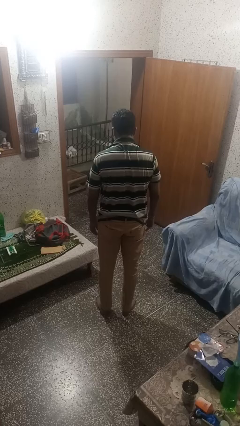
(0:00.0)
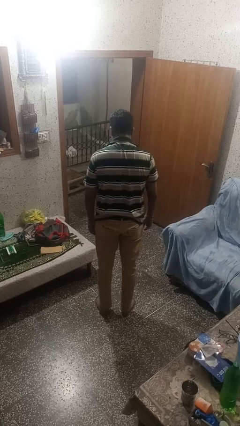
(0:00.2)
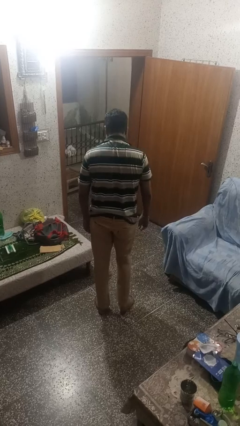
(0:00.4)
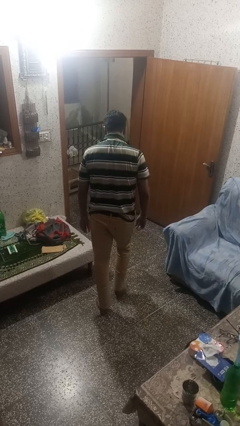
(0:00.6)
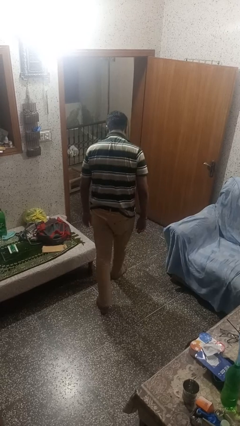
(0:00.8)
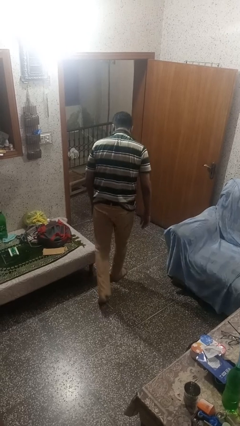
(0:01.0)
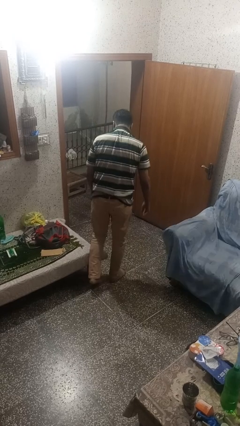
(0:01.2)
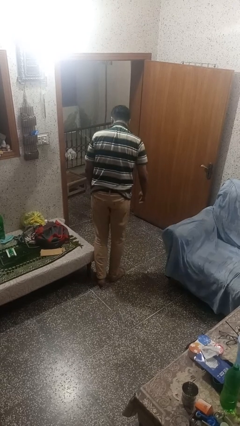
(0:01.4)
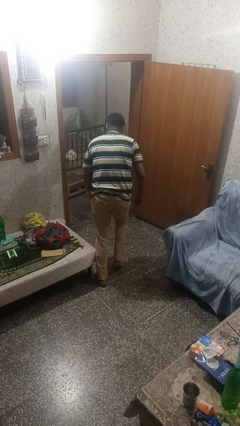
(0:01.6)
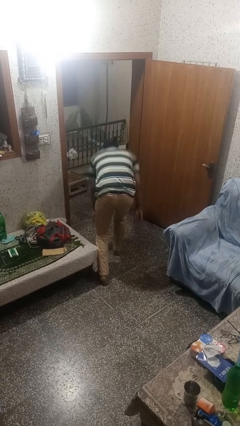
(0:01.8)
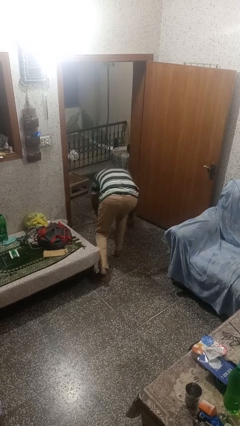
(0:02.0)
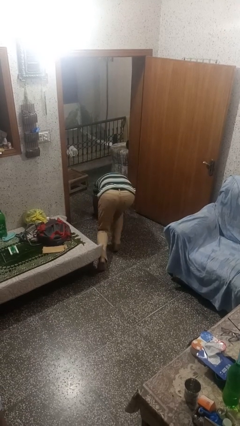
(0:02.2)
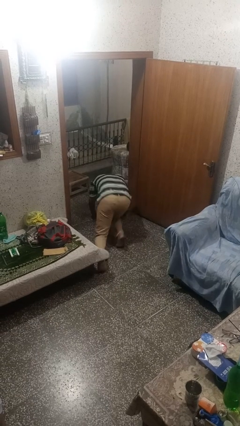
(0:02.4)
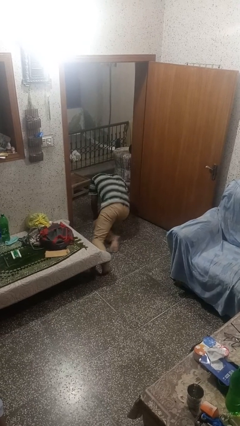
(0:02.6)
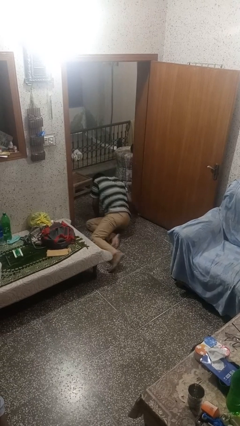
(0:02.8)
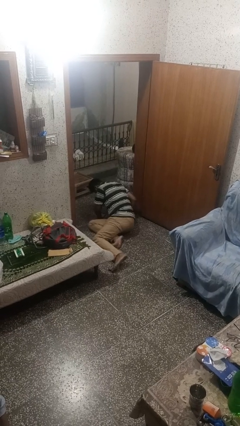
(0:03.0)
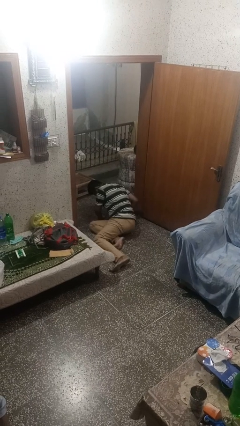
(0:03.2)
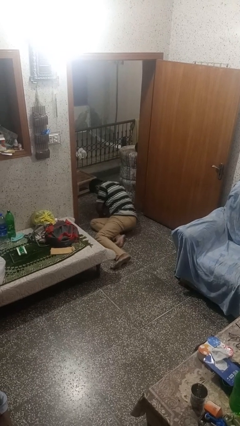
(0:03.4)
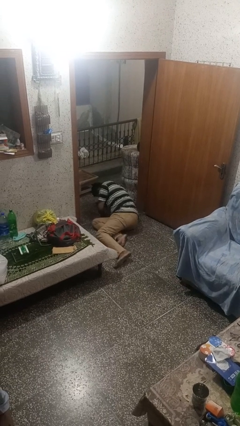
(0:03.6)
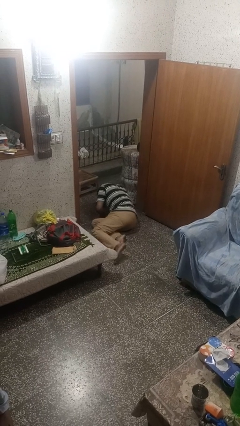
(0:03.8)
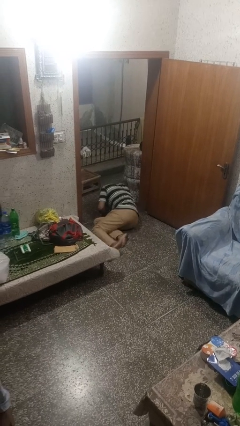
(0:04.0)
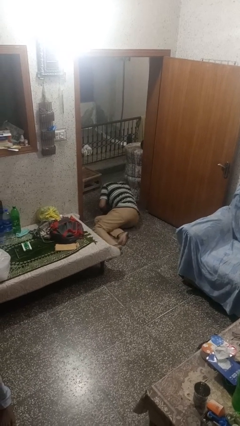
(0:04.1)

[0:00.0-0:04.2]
person trips on object on floor

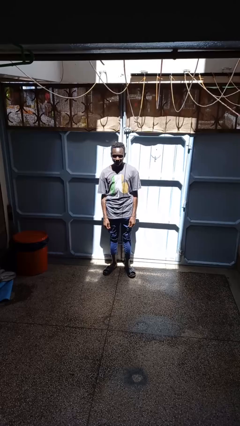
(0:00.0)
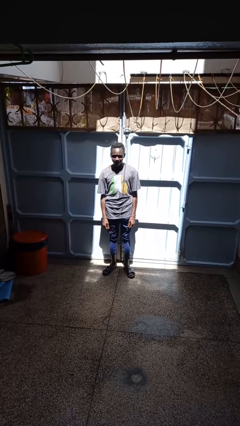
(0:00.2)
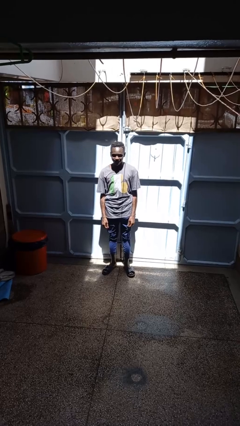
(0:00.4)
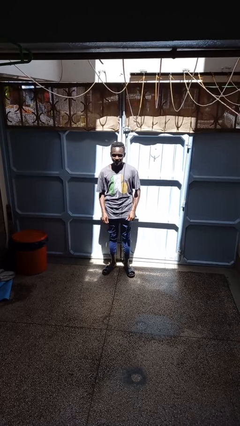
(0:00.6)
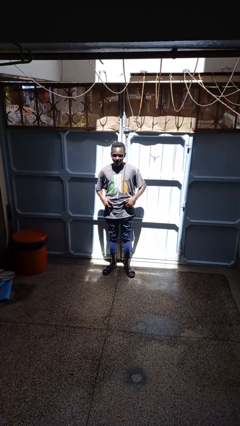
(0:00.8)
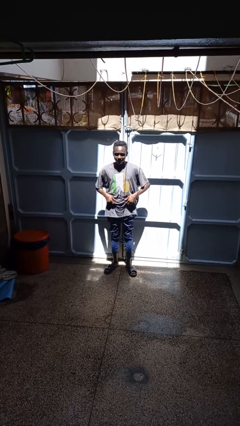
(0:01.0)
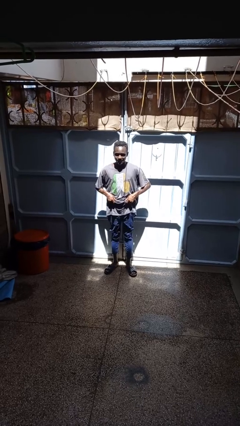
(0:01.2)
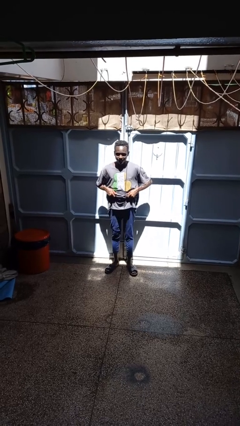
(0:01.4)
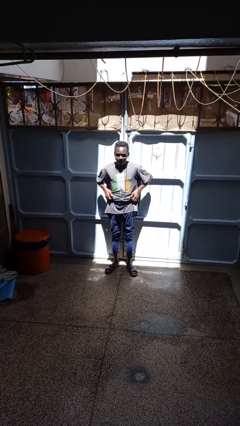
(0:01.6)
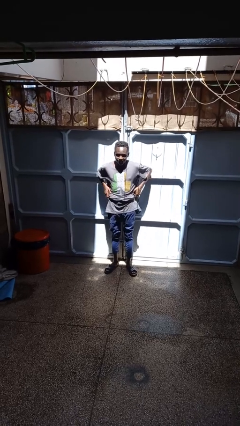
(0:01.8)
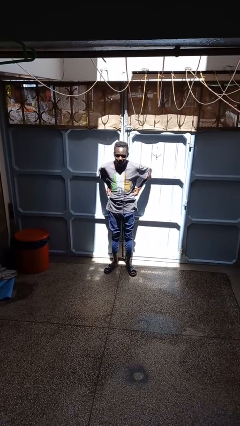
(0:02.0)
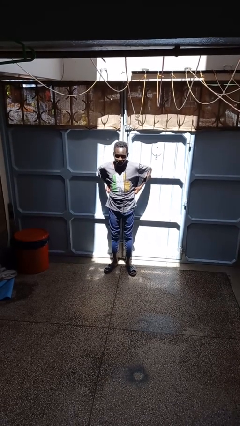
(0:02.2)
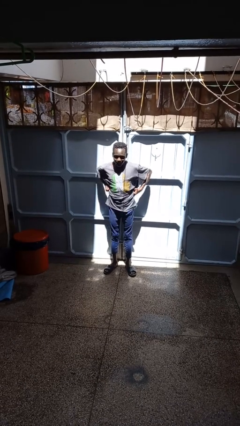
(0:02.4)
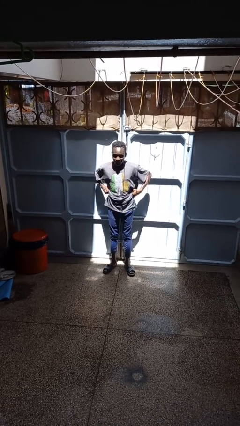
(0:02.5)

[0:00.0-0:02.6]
person hikes up pants

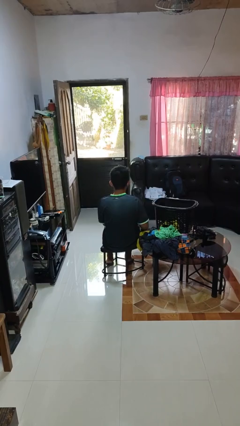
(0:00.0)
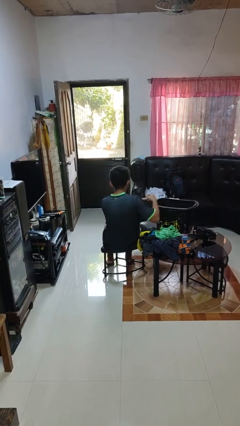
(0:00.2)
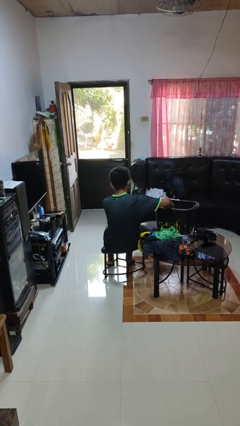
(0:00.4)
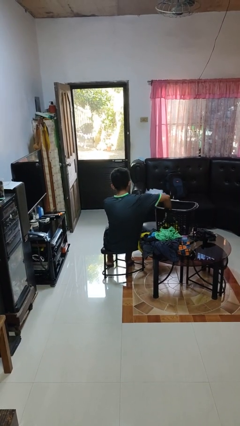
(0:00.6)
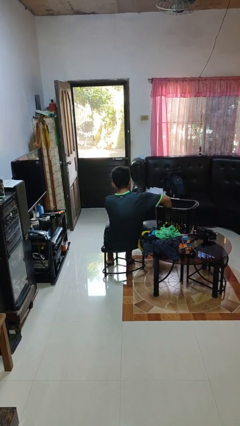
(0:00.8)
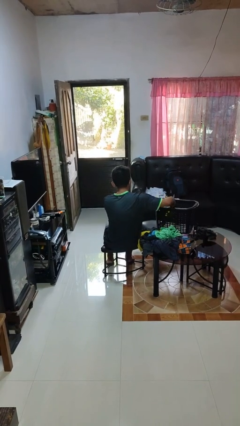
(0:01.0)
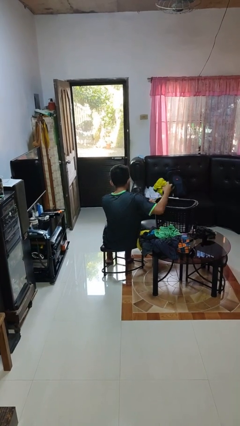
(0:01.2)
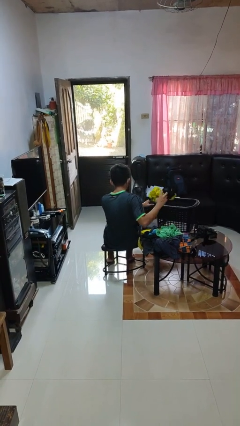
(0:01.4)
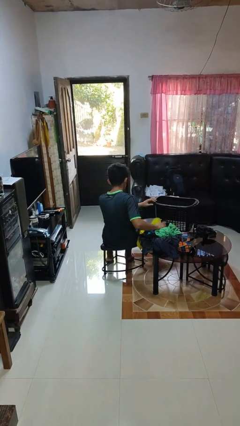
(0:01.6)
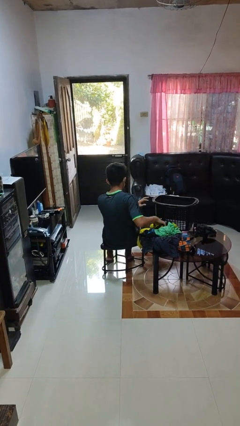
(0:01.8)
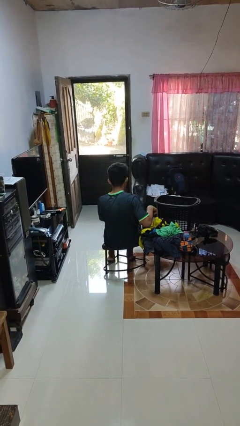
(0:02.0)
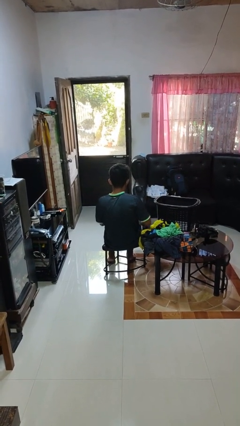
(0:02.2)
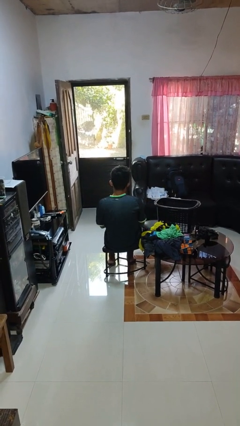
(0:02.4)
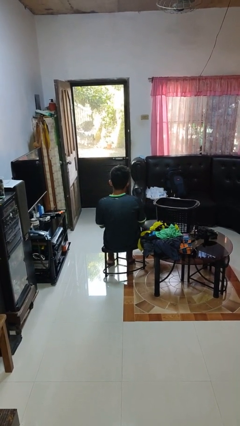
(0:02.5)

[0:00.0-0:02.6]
person takes object from basket

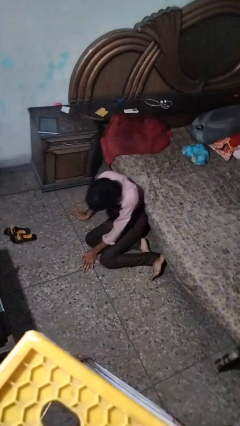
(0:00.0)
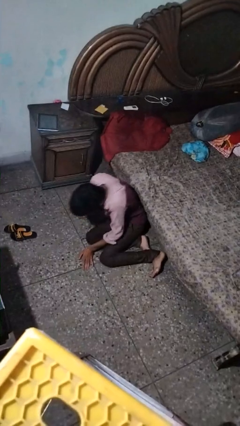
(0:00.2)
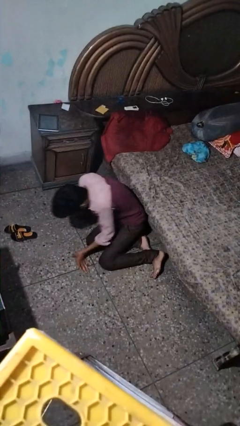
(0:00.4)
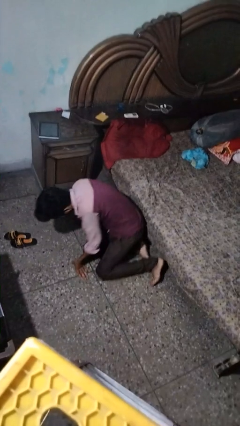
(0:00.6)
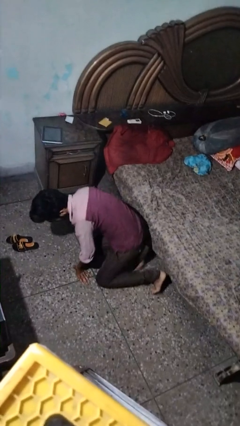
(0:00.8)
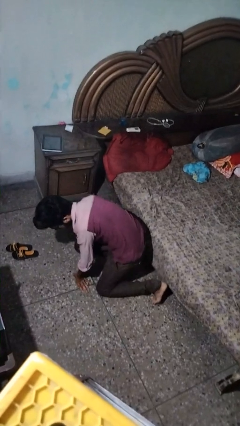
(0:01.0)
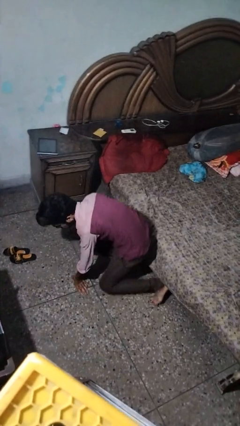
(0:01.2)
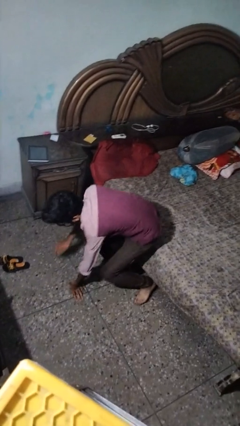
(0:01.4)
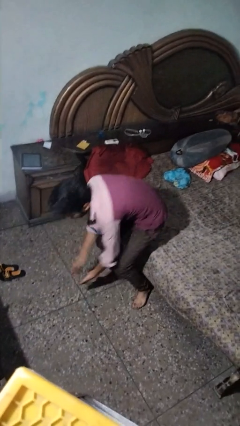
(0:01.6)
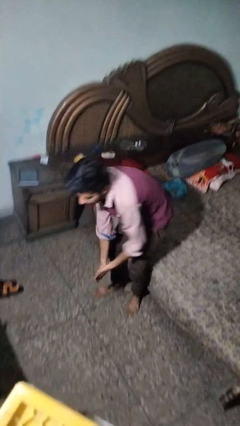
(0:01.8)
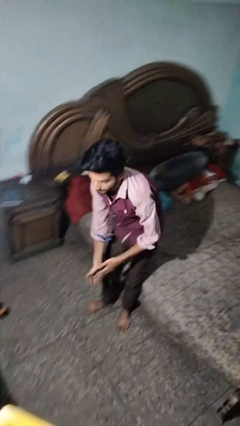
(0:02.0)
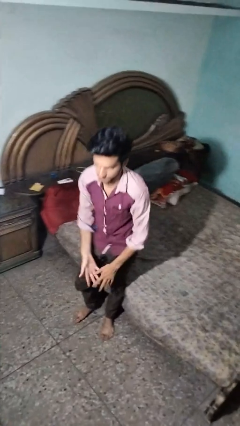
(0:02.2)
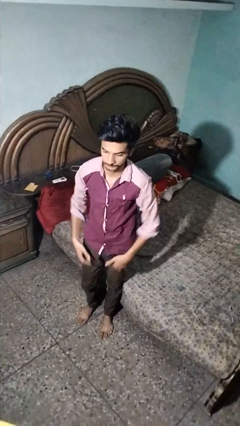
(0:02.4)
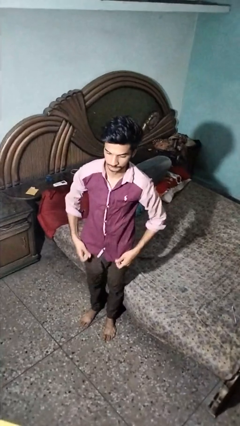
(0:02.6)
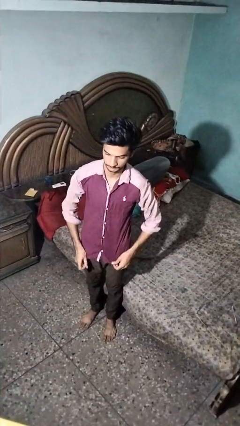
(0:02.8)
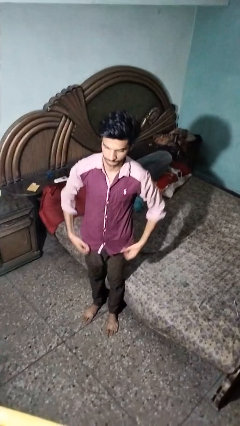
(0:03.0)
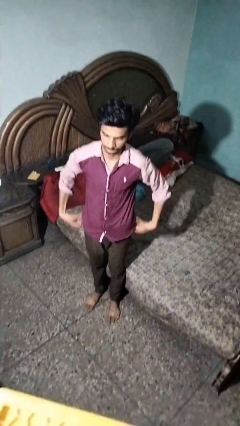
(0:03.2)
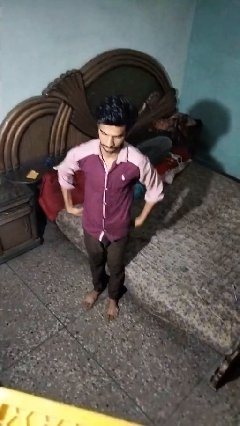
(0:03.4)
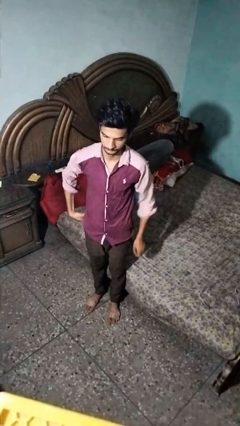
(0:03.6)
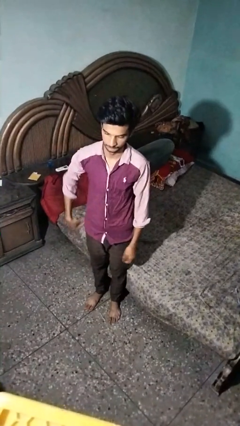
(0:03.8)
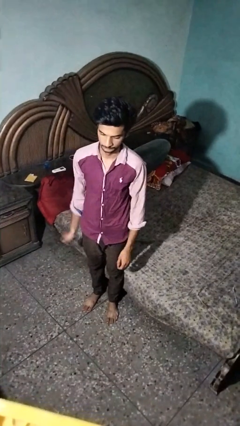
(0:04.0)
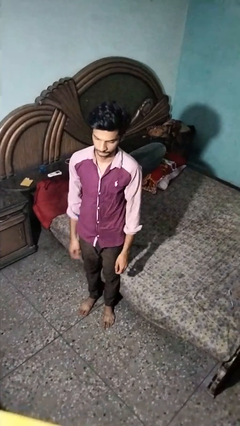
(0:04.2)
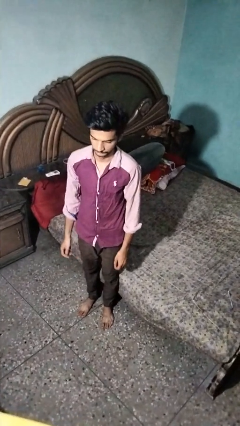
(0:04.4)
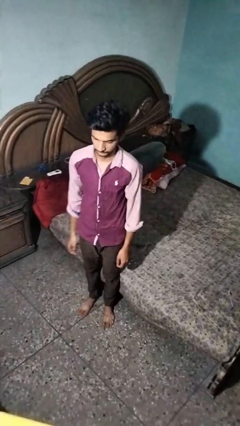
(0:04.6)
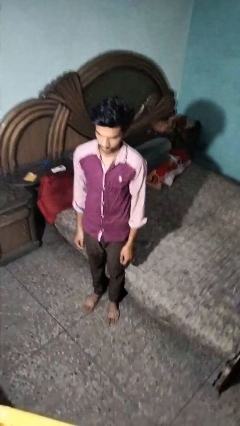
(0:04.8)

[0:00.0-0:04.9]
person stands up from floor

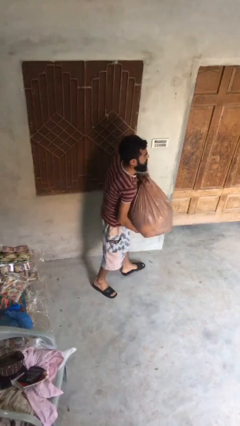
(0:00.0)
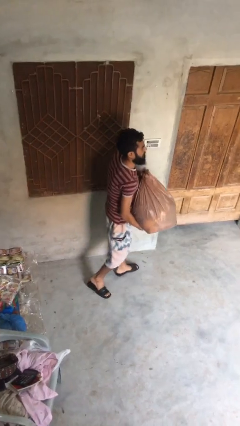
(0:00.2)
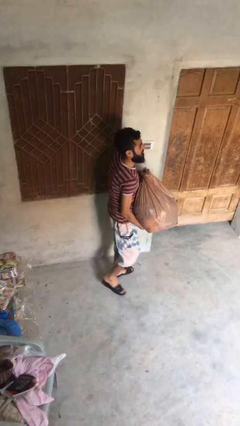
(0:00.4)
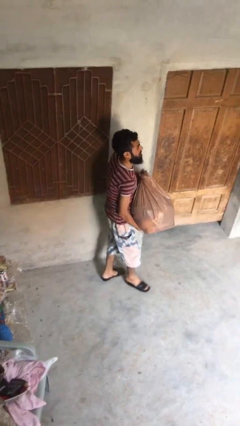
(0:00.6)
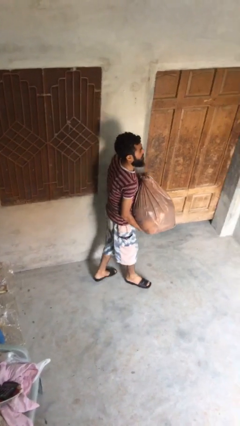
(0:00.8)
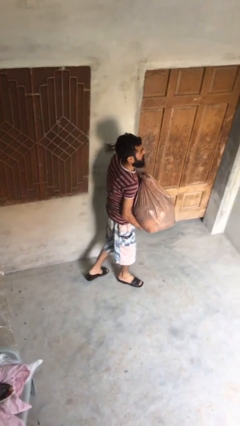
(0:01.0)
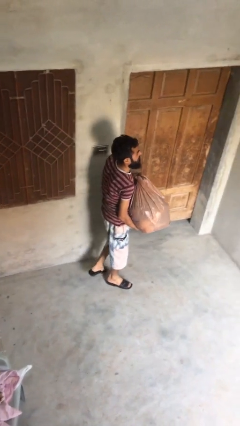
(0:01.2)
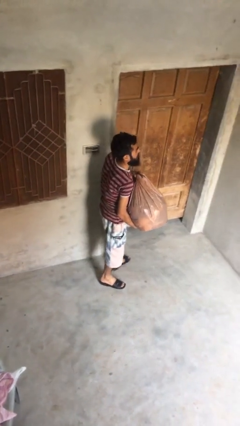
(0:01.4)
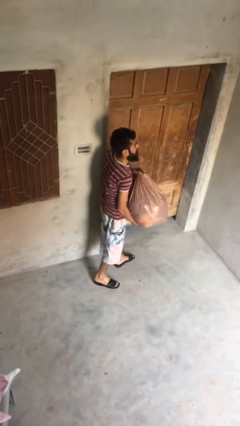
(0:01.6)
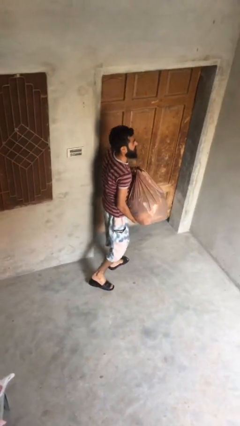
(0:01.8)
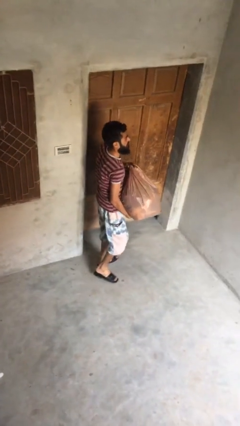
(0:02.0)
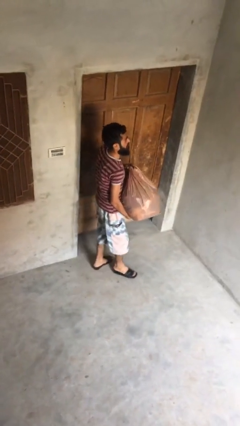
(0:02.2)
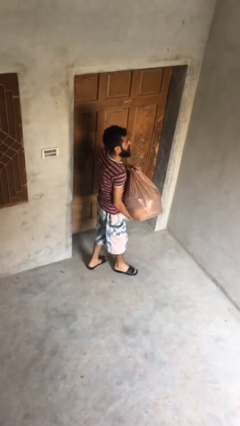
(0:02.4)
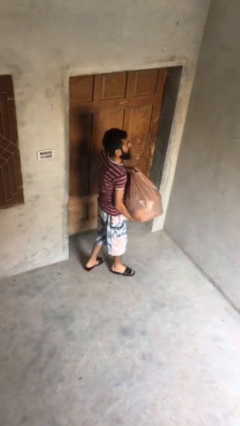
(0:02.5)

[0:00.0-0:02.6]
person carries heavy object

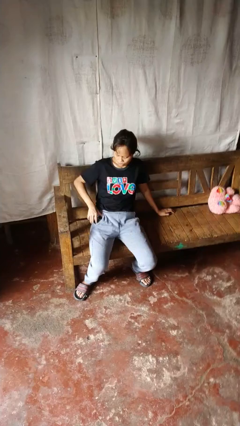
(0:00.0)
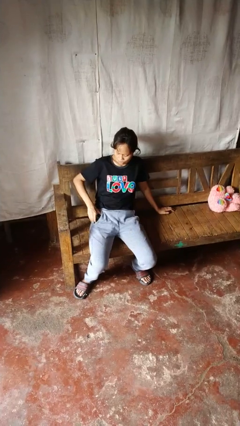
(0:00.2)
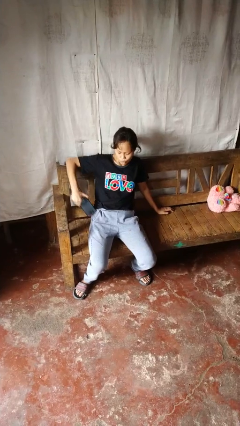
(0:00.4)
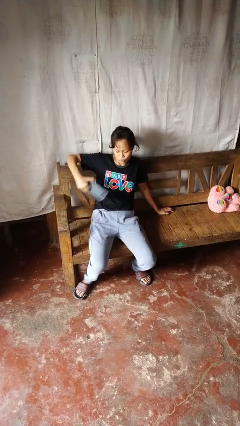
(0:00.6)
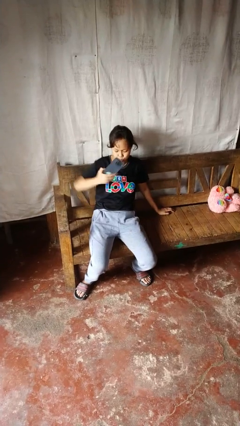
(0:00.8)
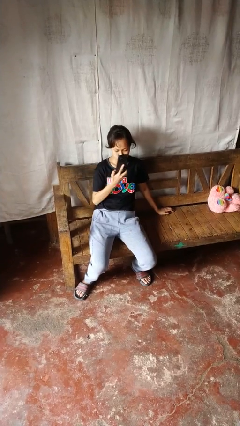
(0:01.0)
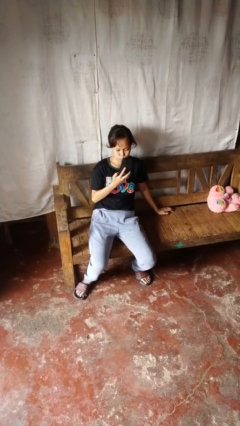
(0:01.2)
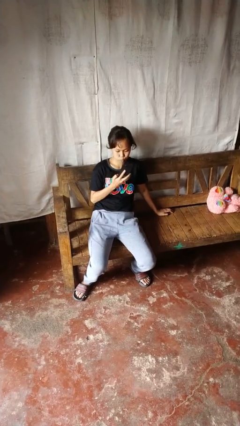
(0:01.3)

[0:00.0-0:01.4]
person takes phone from pocket
